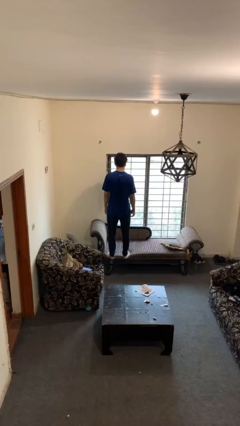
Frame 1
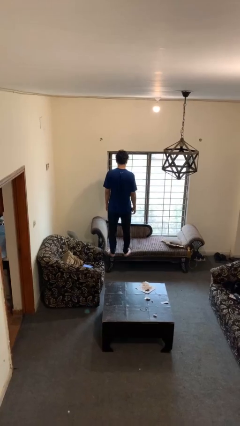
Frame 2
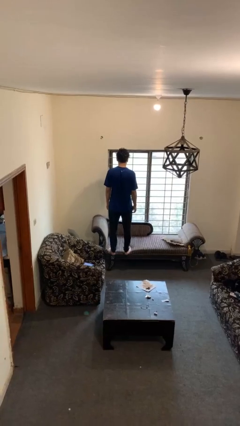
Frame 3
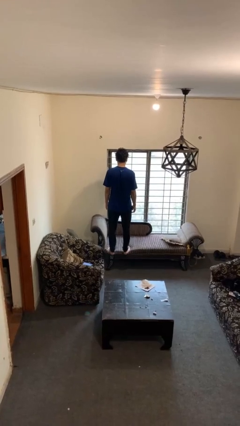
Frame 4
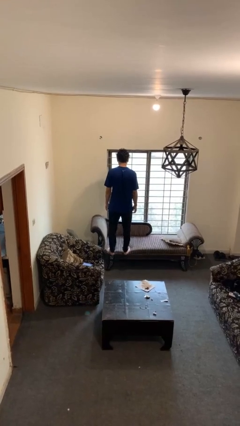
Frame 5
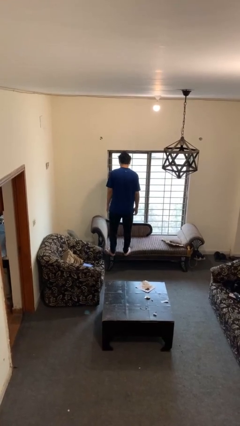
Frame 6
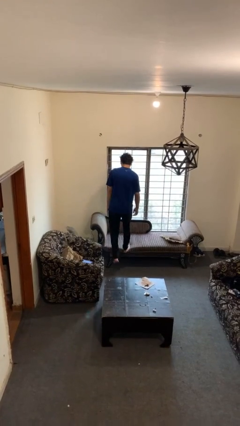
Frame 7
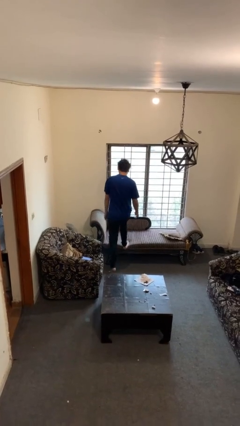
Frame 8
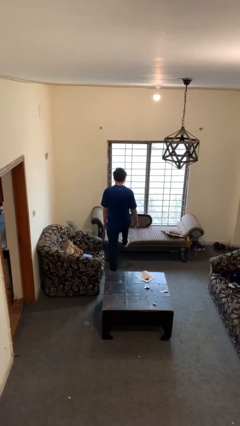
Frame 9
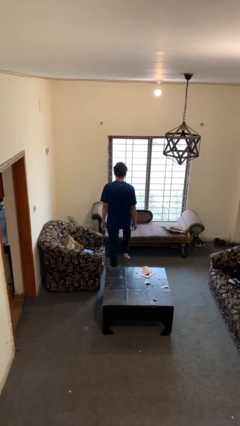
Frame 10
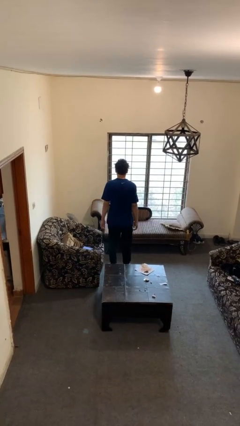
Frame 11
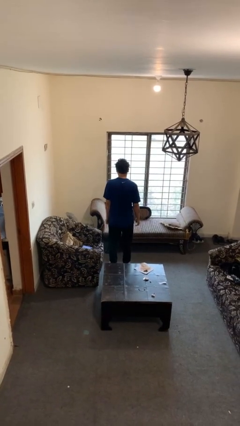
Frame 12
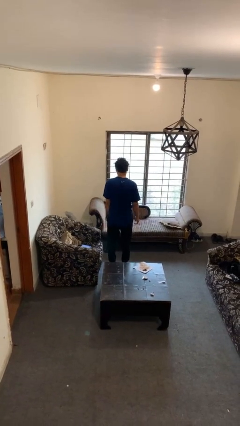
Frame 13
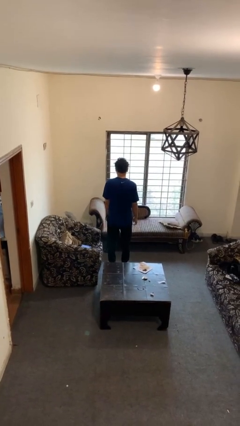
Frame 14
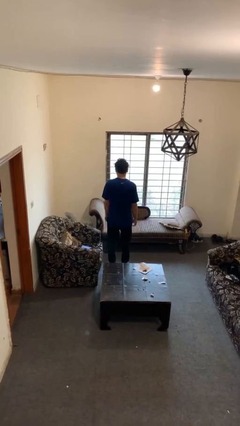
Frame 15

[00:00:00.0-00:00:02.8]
person climbs off couch

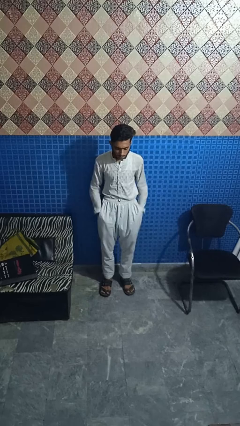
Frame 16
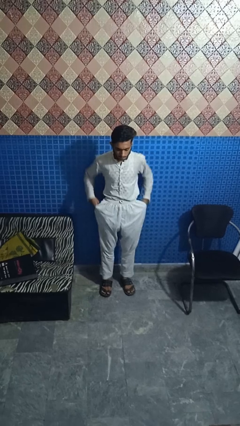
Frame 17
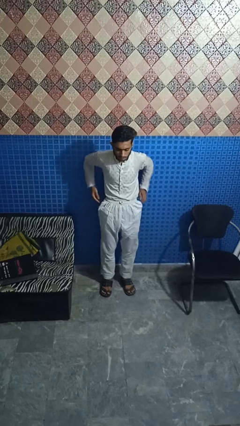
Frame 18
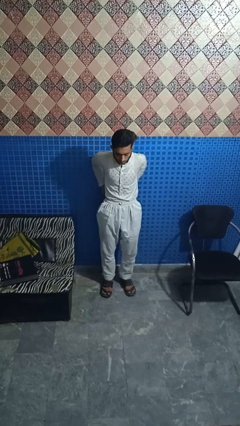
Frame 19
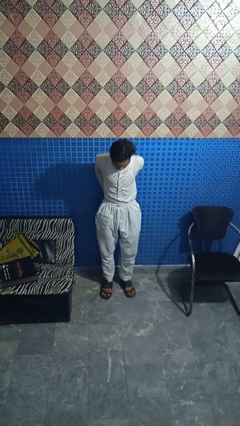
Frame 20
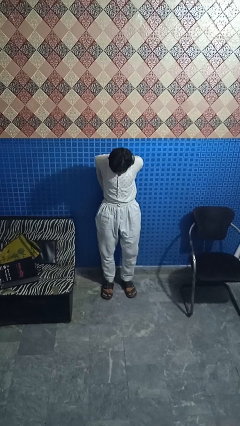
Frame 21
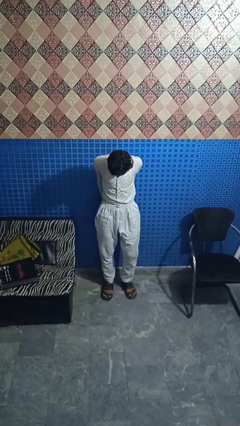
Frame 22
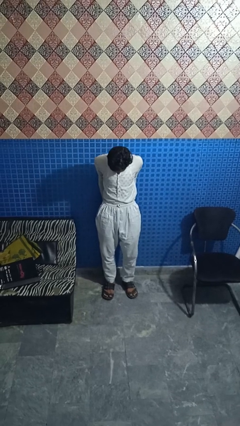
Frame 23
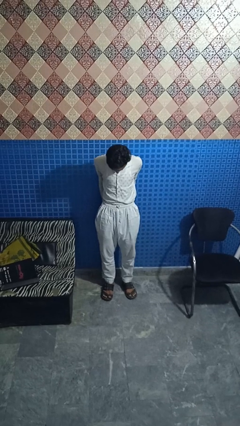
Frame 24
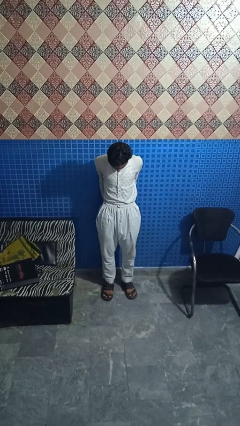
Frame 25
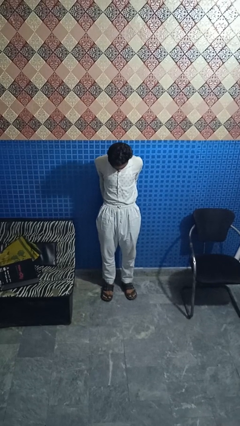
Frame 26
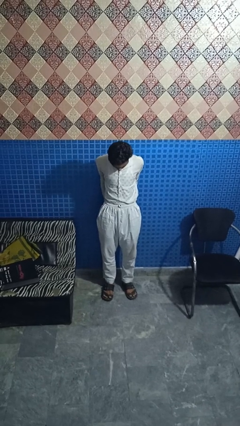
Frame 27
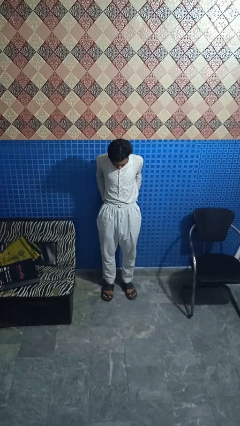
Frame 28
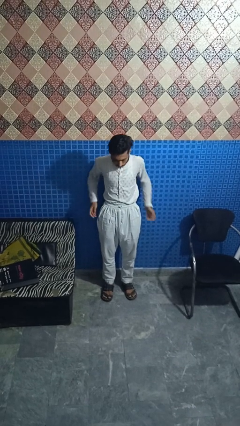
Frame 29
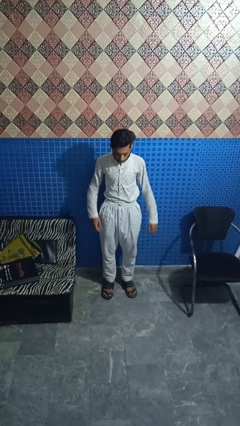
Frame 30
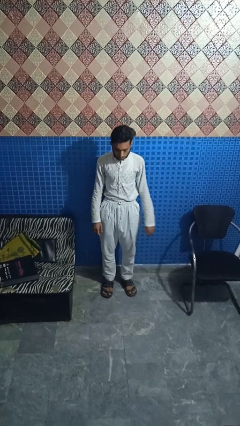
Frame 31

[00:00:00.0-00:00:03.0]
person puts hands in back pockets

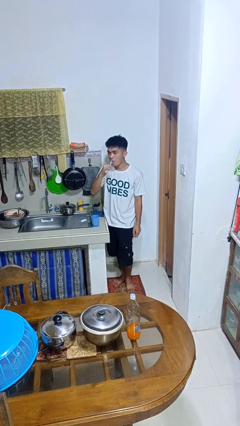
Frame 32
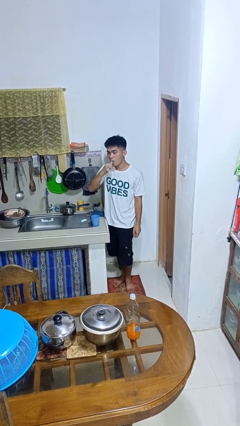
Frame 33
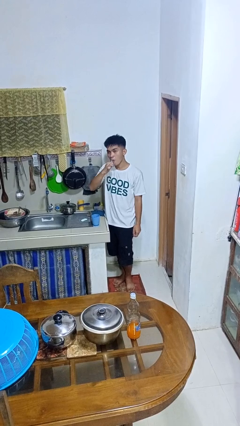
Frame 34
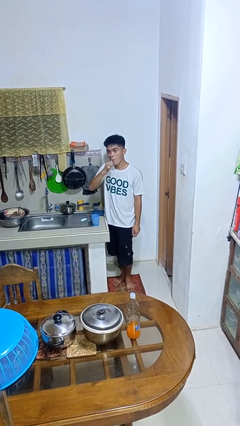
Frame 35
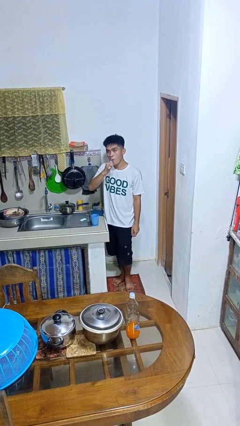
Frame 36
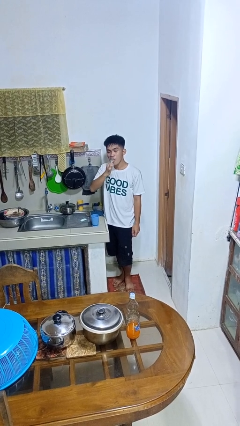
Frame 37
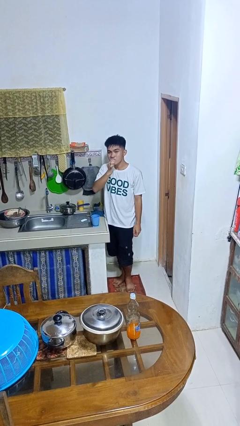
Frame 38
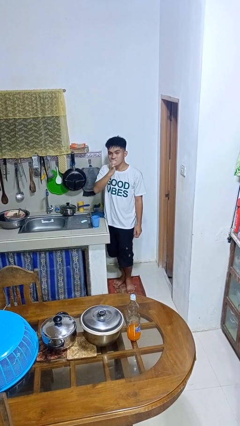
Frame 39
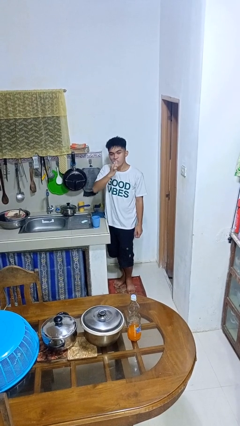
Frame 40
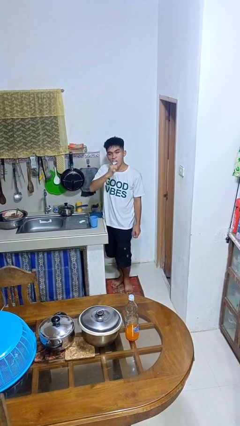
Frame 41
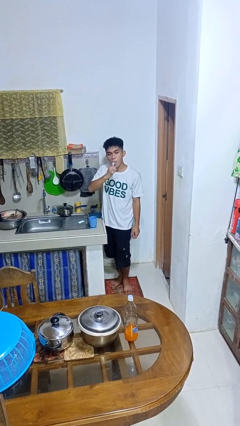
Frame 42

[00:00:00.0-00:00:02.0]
person brushes teeth

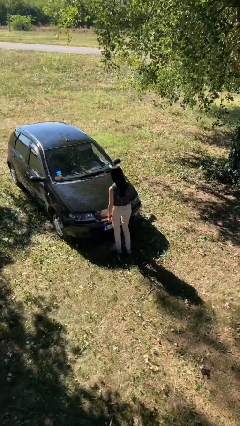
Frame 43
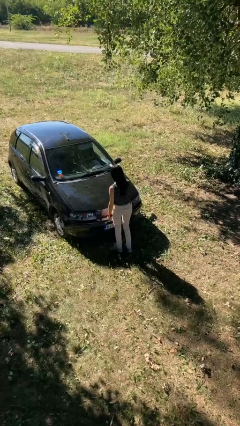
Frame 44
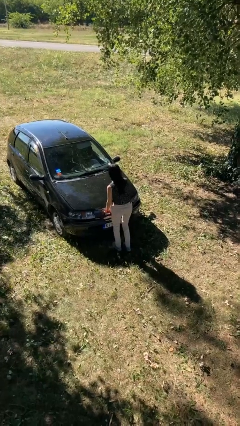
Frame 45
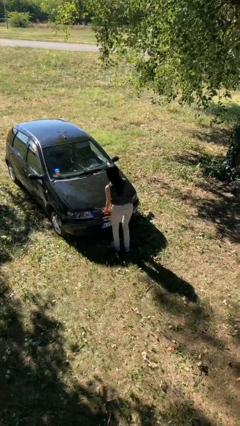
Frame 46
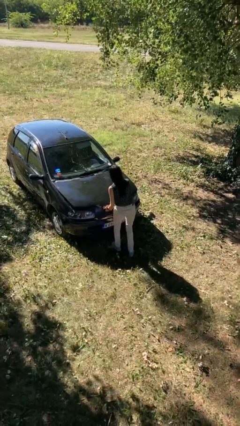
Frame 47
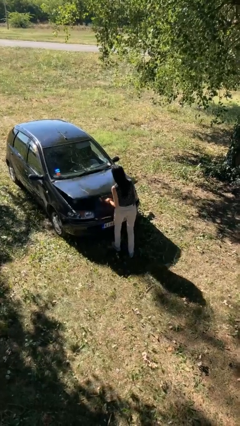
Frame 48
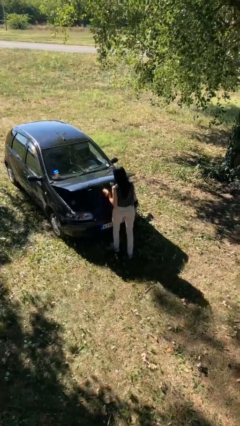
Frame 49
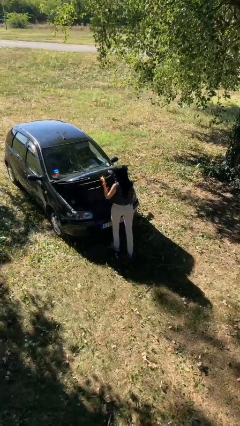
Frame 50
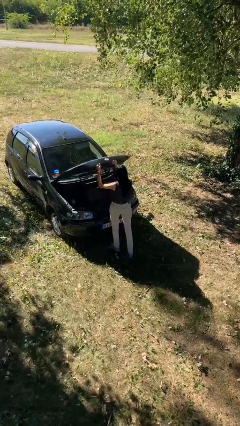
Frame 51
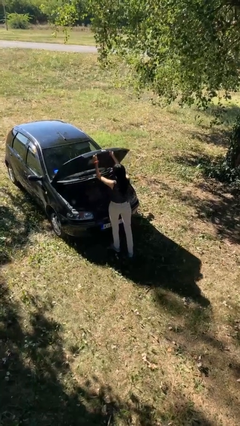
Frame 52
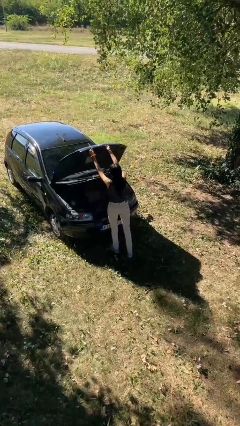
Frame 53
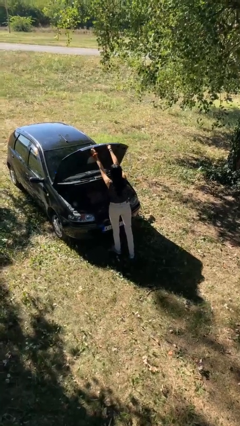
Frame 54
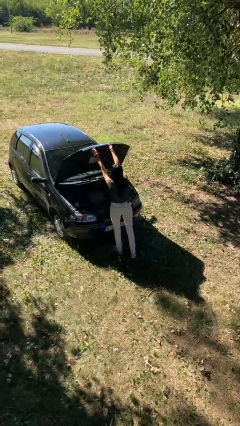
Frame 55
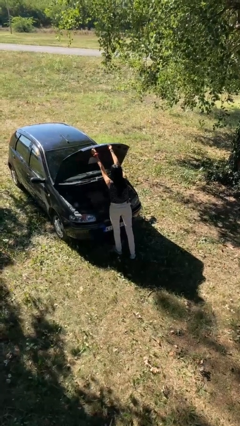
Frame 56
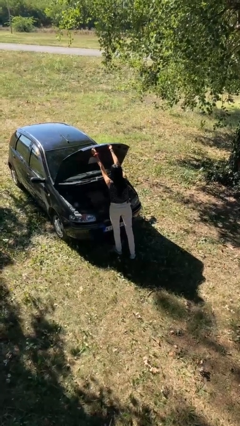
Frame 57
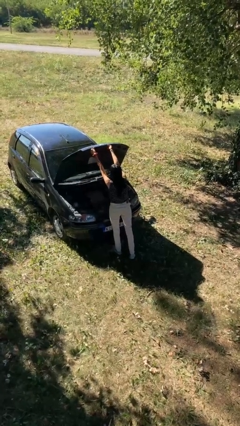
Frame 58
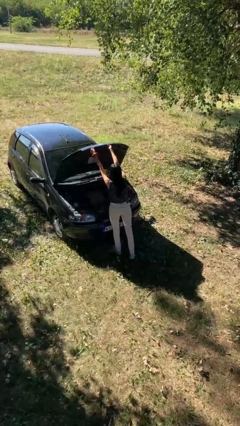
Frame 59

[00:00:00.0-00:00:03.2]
person opens car hood

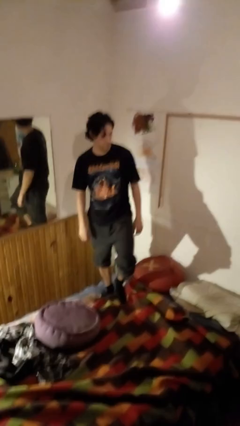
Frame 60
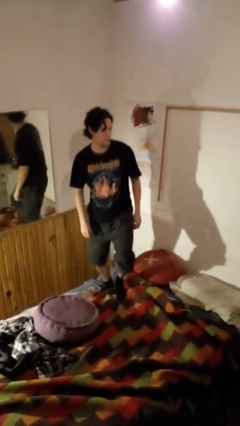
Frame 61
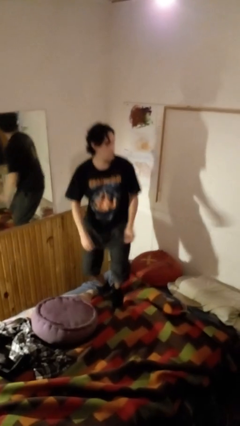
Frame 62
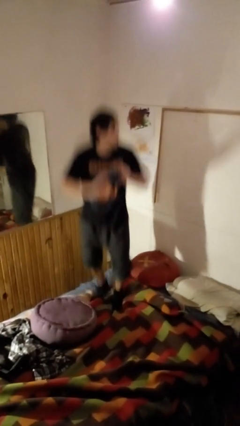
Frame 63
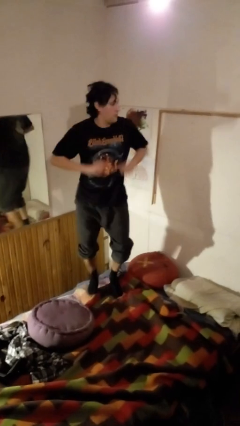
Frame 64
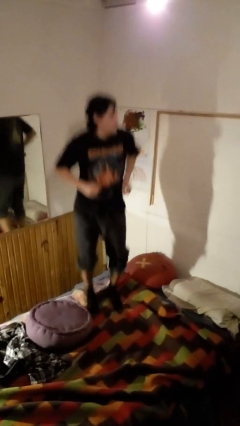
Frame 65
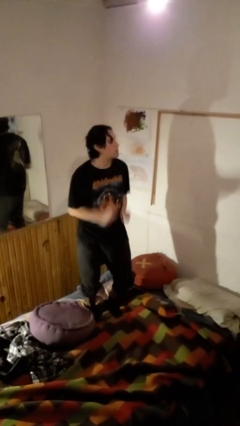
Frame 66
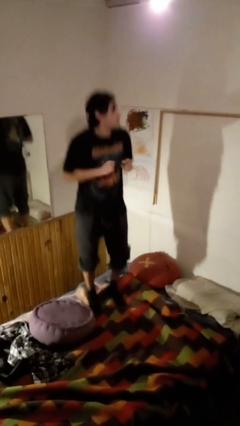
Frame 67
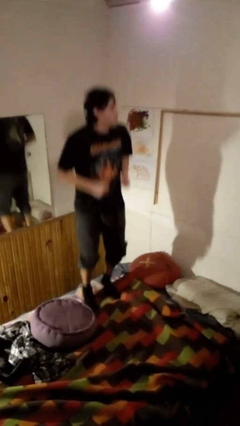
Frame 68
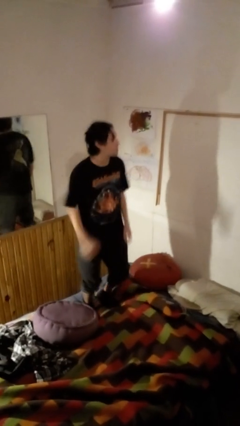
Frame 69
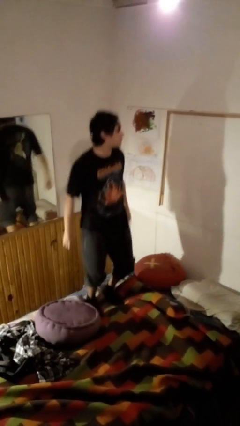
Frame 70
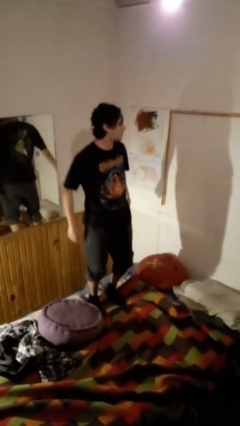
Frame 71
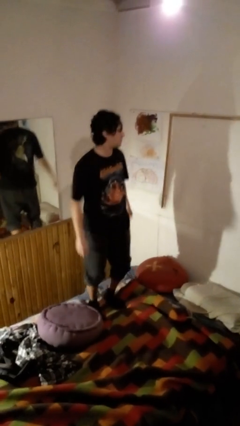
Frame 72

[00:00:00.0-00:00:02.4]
person jumps on bed

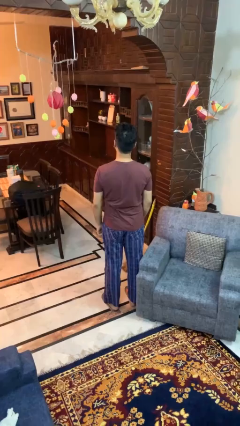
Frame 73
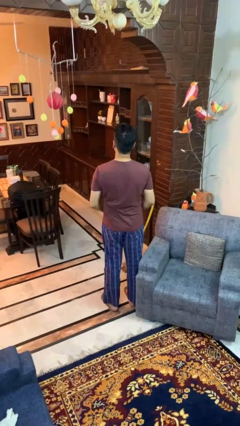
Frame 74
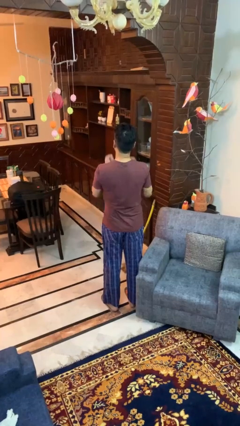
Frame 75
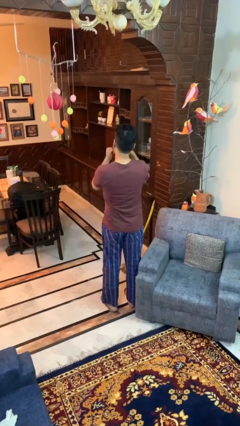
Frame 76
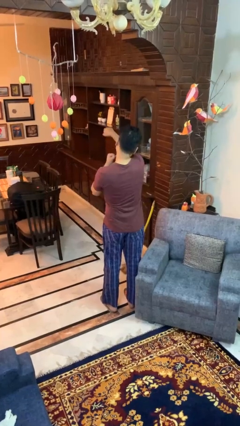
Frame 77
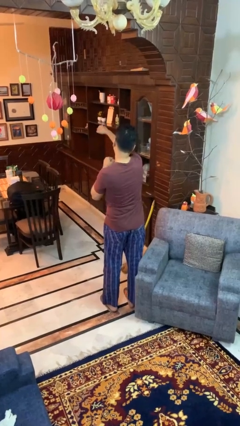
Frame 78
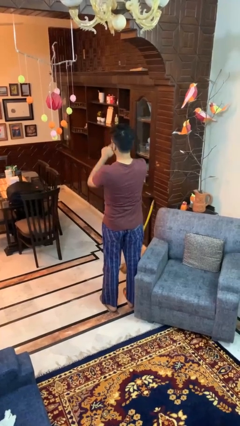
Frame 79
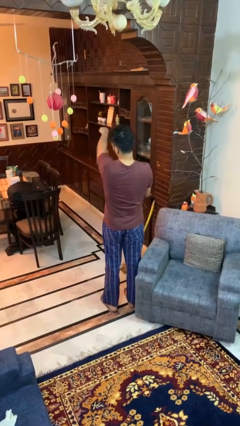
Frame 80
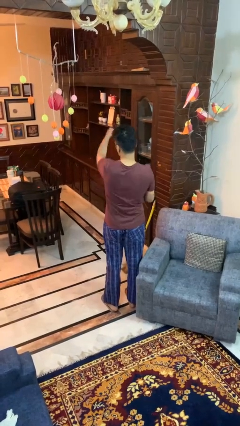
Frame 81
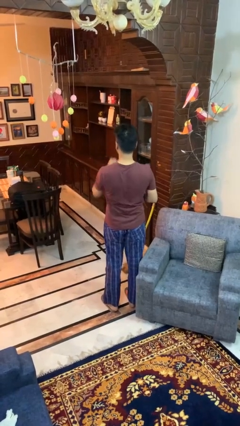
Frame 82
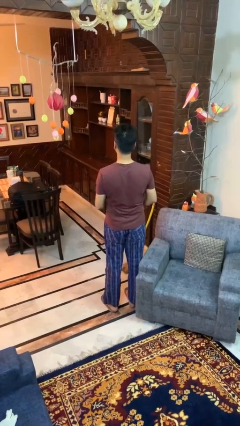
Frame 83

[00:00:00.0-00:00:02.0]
person punches

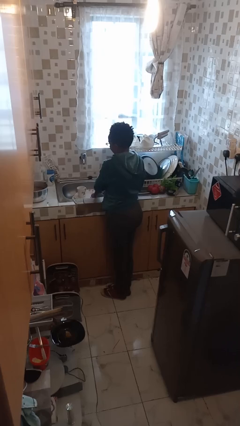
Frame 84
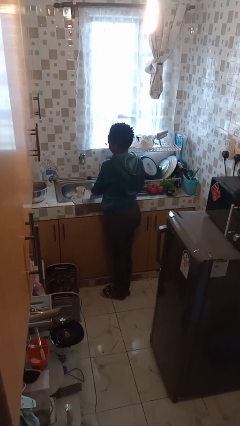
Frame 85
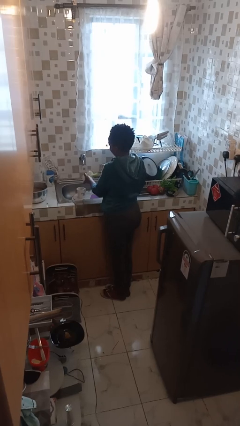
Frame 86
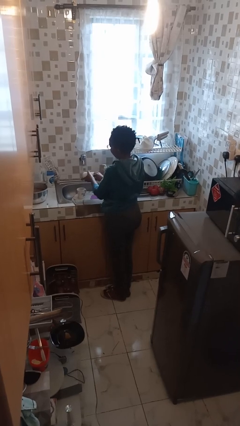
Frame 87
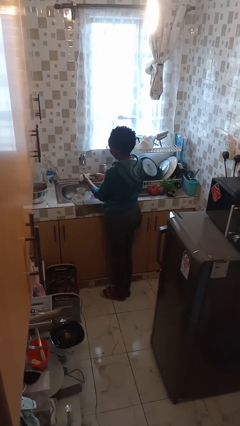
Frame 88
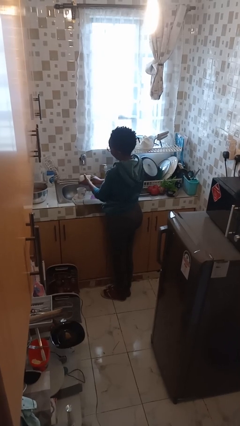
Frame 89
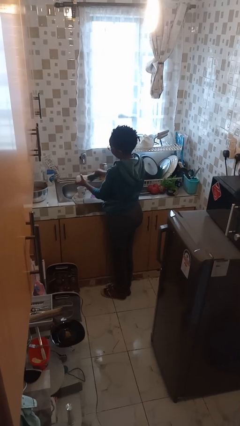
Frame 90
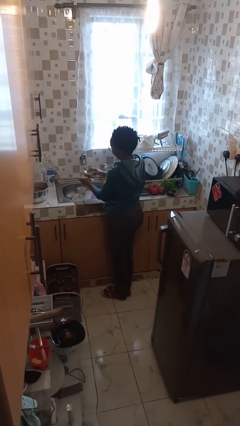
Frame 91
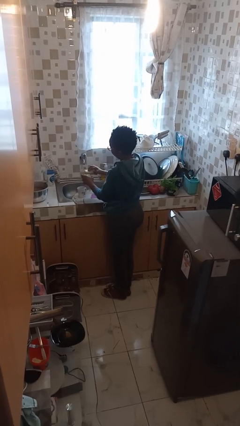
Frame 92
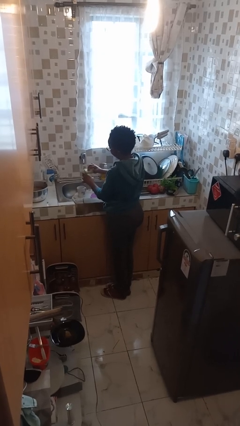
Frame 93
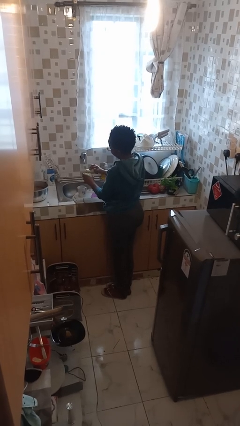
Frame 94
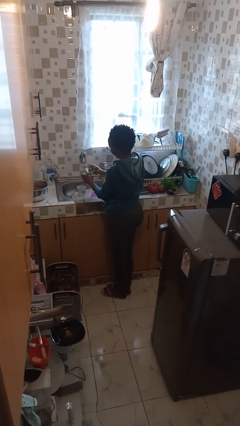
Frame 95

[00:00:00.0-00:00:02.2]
person washes dish
